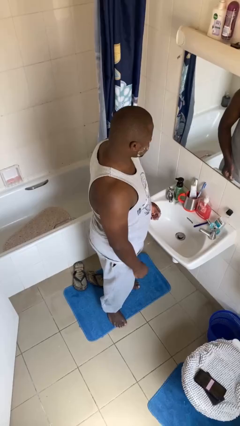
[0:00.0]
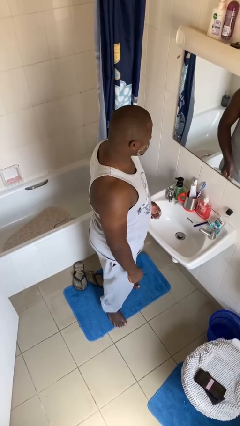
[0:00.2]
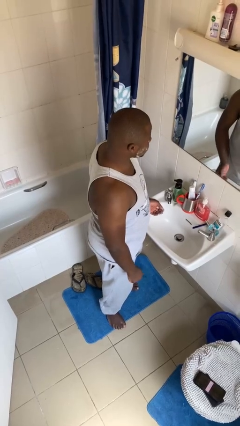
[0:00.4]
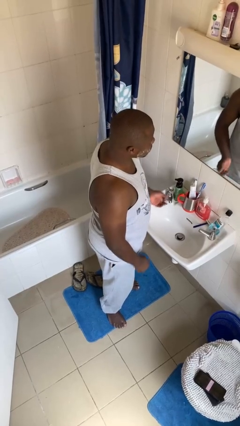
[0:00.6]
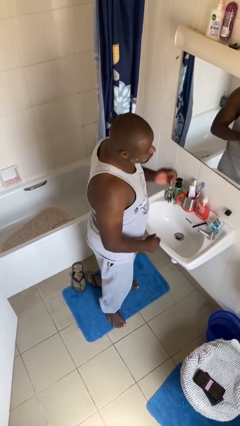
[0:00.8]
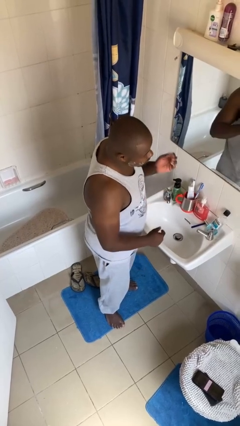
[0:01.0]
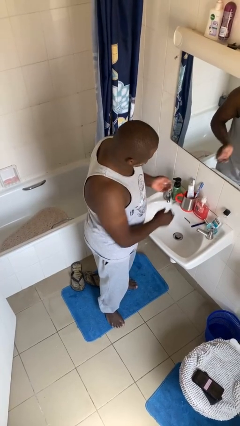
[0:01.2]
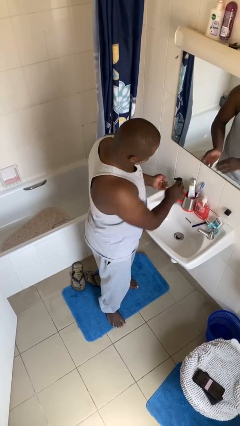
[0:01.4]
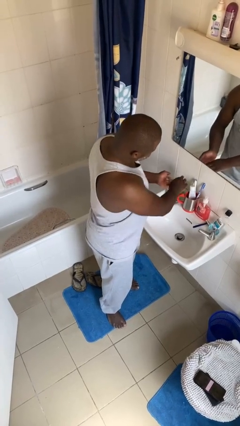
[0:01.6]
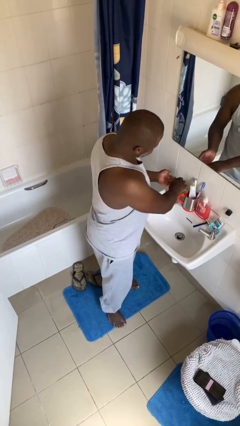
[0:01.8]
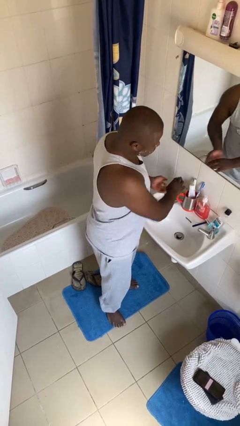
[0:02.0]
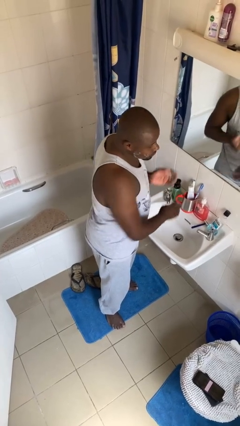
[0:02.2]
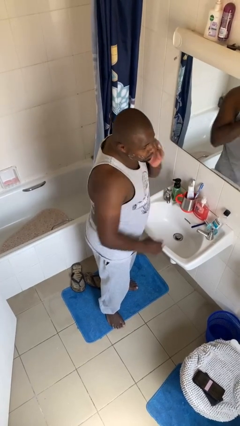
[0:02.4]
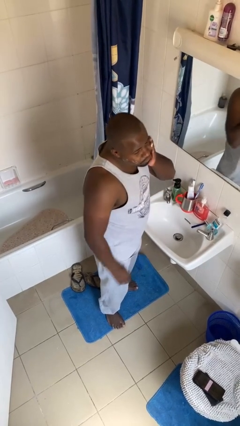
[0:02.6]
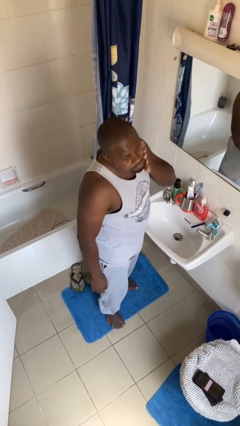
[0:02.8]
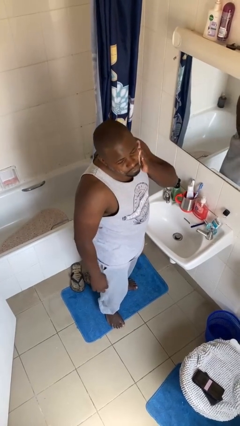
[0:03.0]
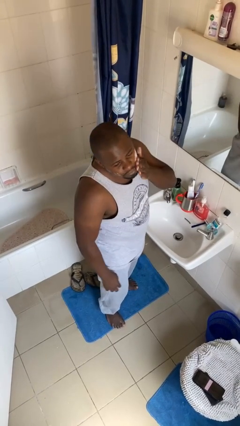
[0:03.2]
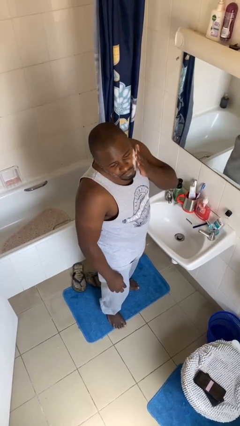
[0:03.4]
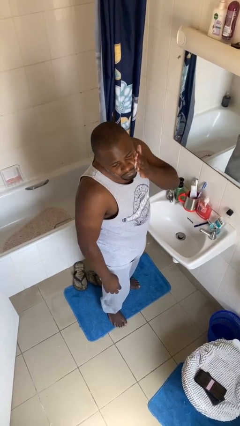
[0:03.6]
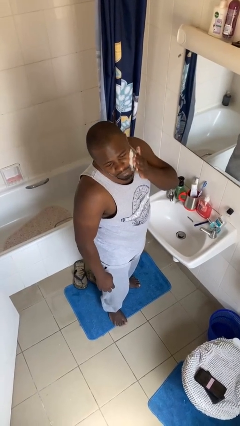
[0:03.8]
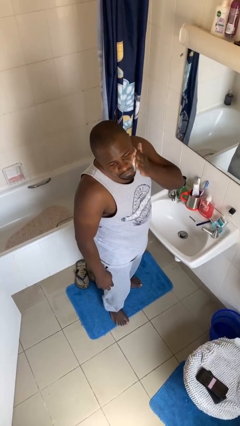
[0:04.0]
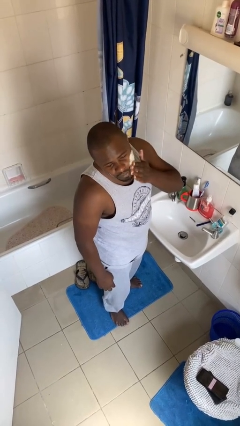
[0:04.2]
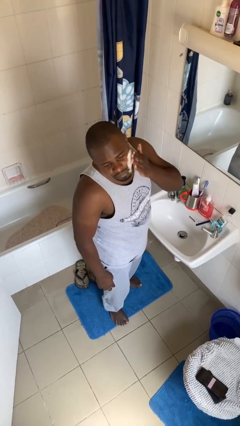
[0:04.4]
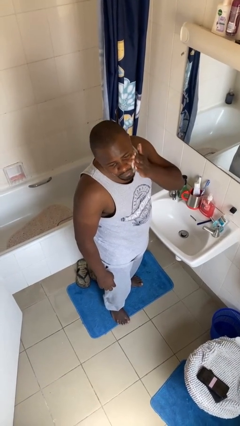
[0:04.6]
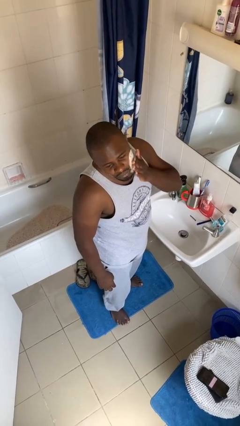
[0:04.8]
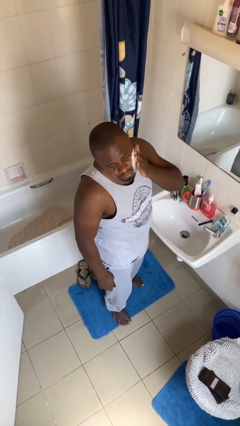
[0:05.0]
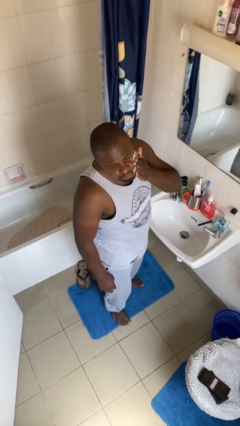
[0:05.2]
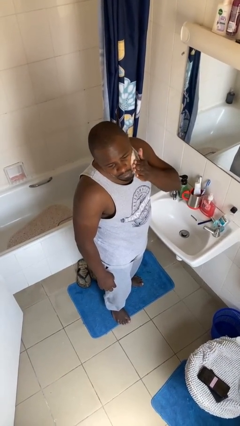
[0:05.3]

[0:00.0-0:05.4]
person applies shaving cream

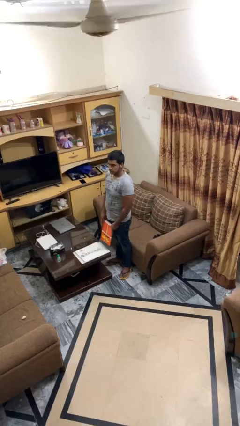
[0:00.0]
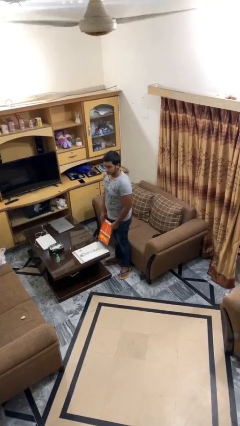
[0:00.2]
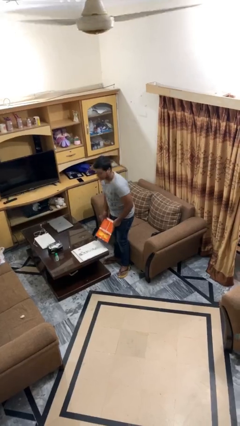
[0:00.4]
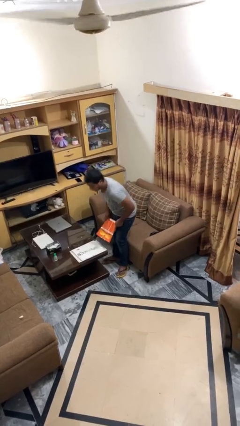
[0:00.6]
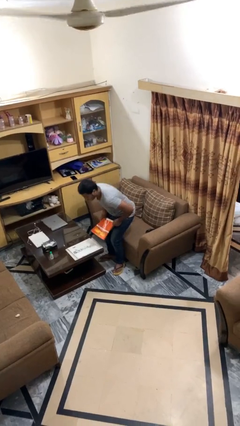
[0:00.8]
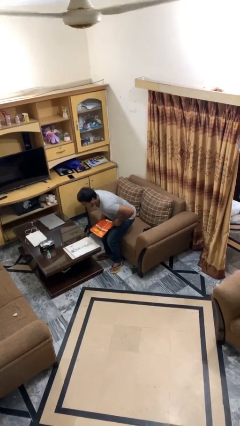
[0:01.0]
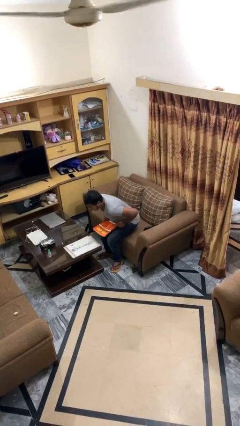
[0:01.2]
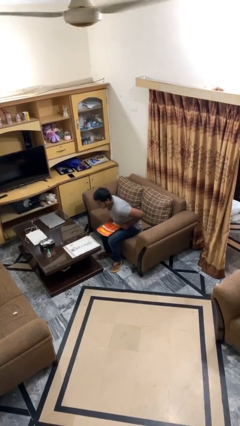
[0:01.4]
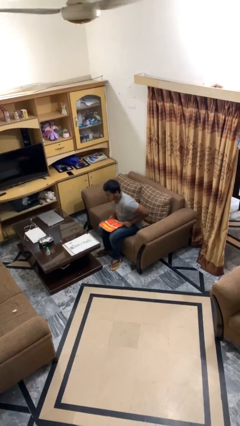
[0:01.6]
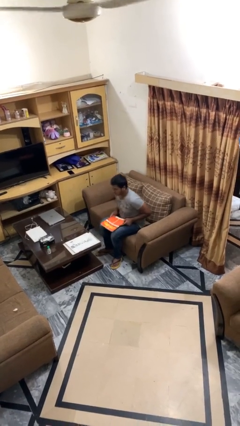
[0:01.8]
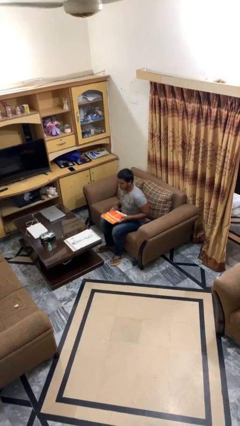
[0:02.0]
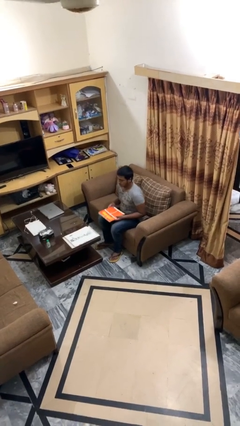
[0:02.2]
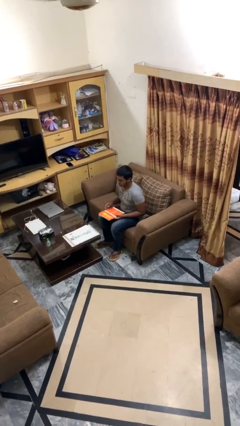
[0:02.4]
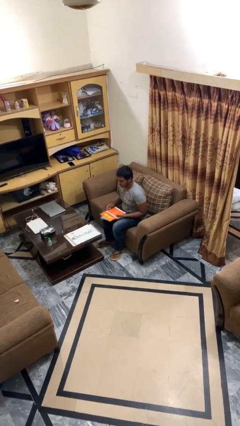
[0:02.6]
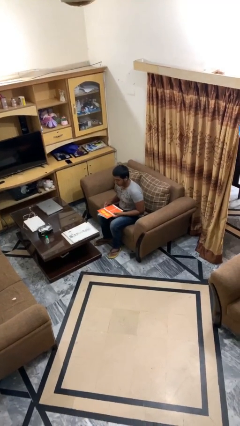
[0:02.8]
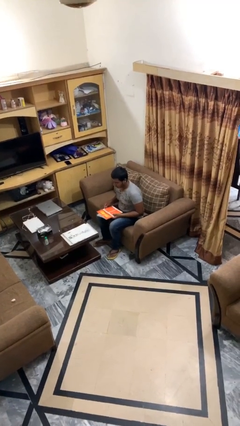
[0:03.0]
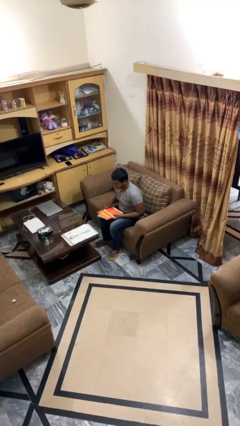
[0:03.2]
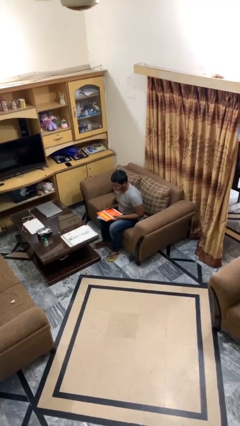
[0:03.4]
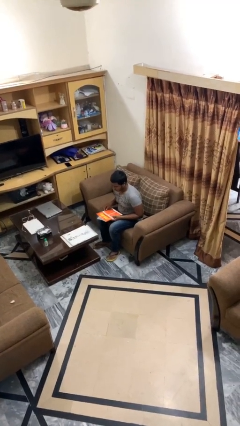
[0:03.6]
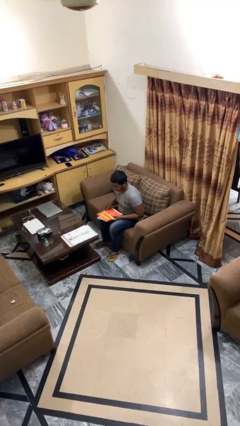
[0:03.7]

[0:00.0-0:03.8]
person sits down

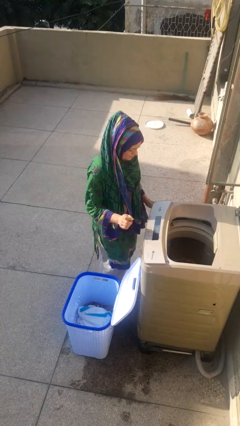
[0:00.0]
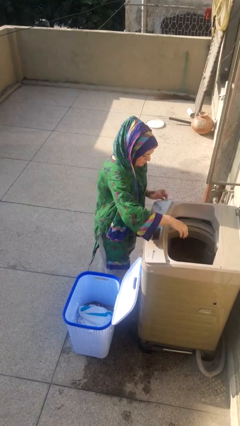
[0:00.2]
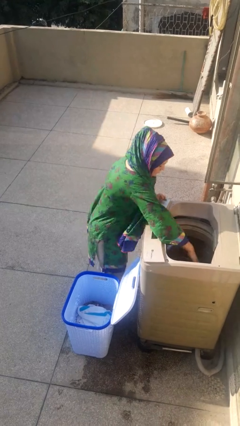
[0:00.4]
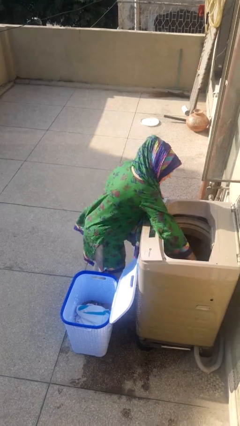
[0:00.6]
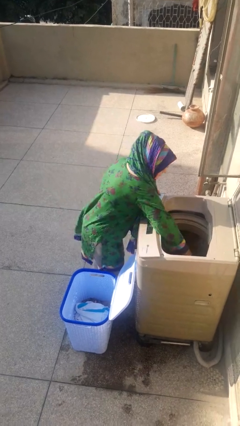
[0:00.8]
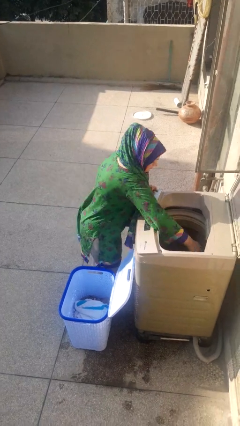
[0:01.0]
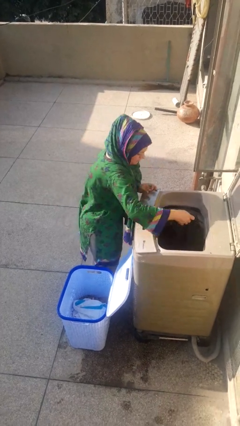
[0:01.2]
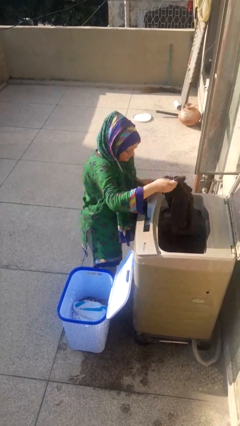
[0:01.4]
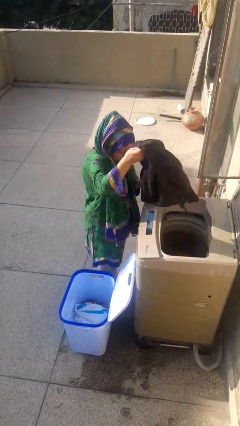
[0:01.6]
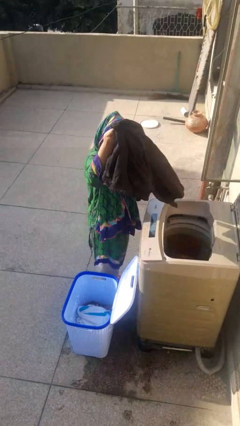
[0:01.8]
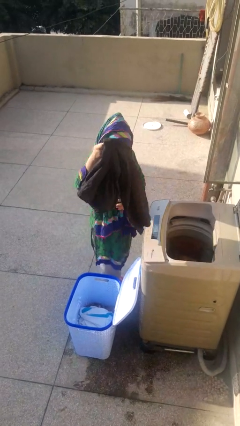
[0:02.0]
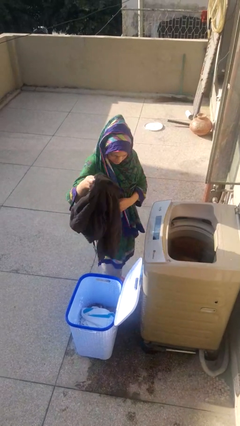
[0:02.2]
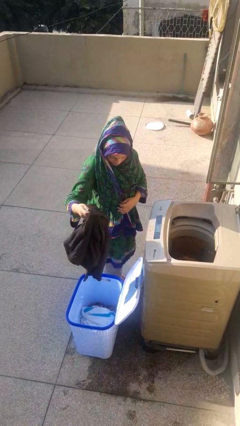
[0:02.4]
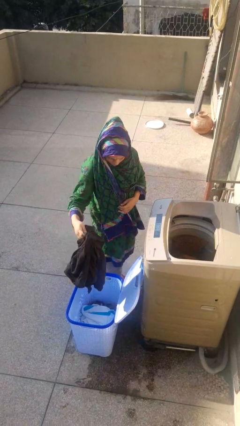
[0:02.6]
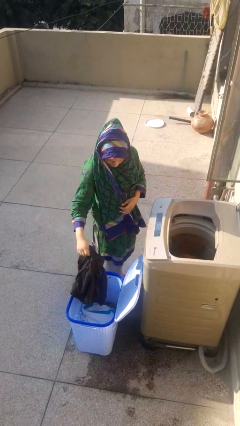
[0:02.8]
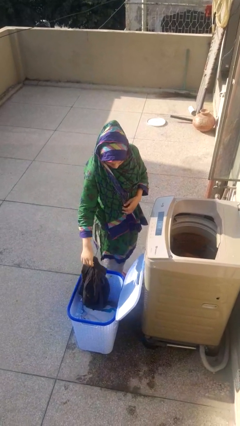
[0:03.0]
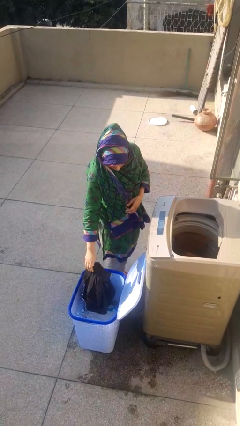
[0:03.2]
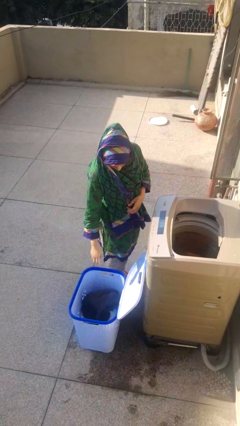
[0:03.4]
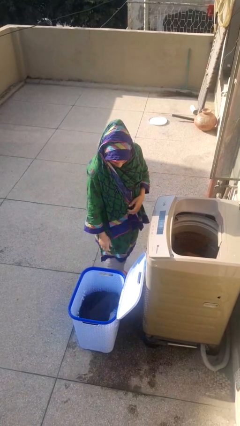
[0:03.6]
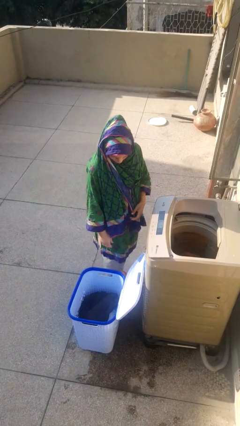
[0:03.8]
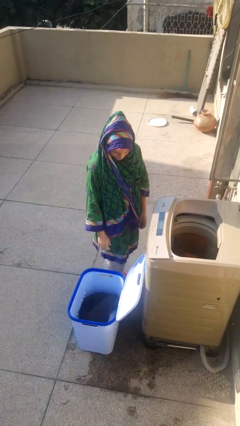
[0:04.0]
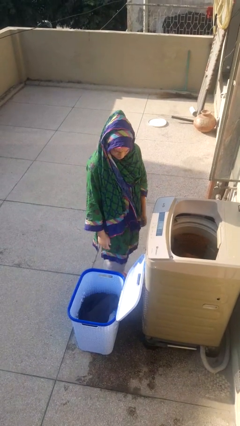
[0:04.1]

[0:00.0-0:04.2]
person unloads clotheswasher

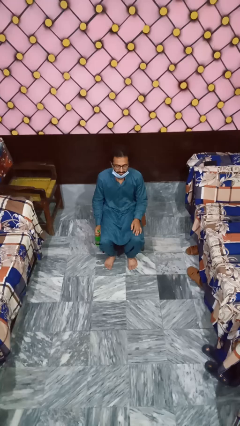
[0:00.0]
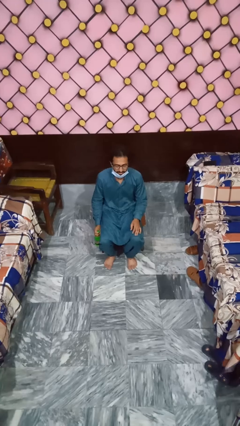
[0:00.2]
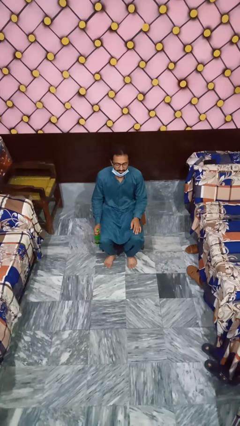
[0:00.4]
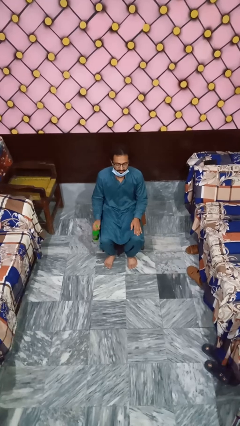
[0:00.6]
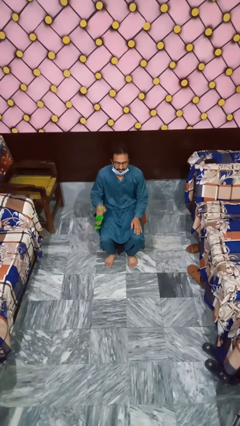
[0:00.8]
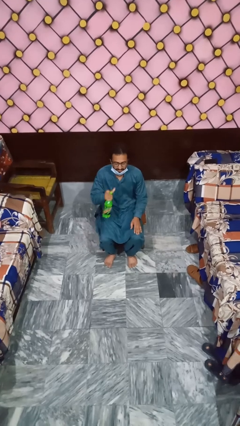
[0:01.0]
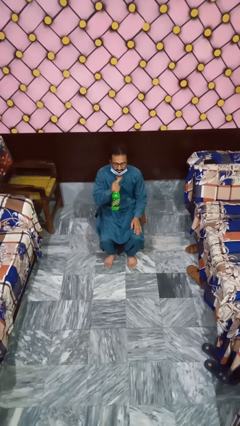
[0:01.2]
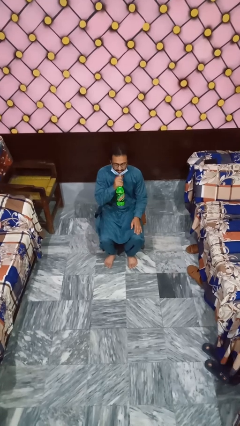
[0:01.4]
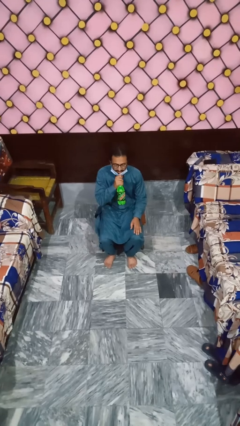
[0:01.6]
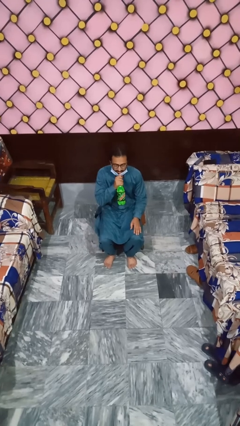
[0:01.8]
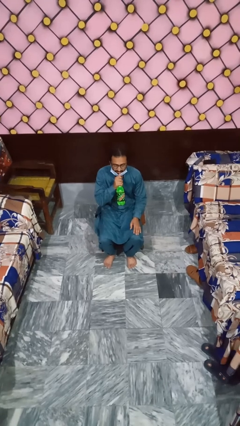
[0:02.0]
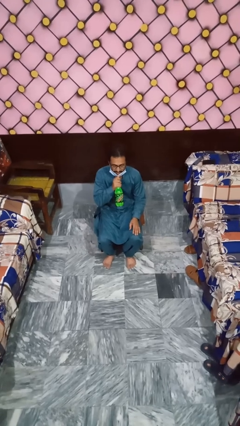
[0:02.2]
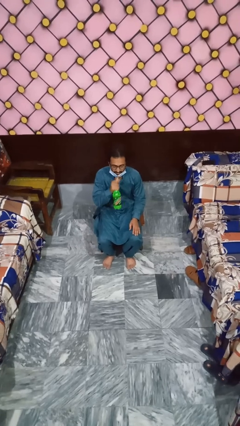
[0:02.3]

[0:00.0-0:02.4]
person drinks from straw

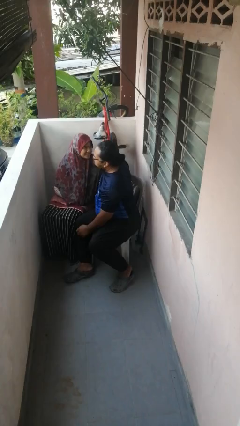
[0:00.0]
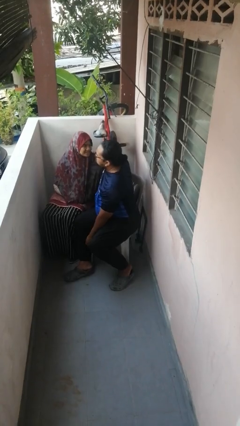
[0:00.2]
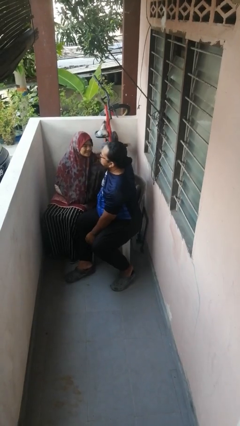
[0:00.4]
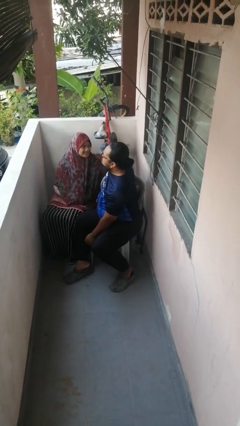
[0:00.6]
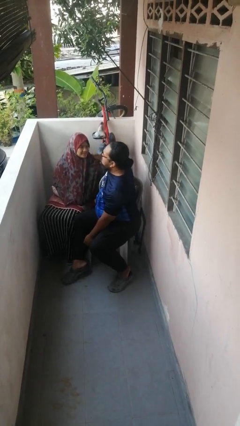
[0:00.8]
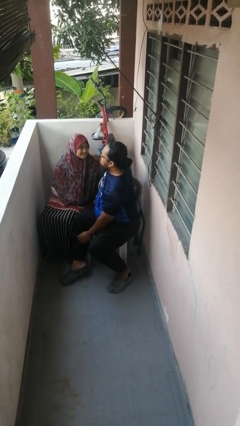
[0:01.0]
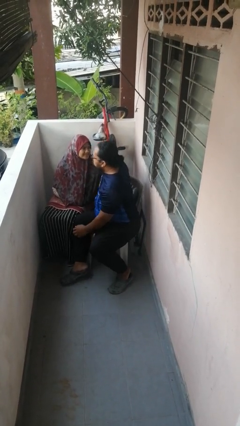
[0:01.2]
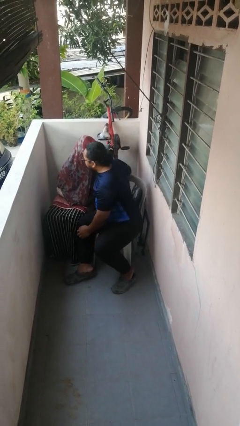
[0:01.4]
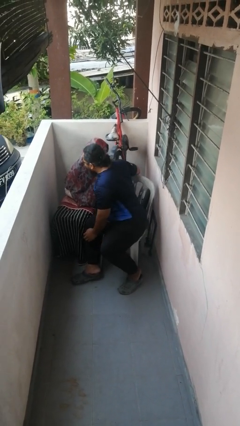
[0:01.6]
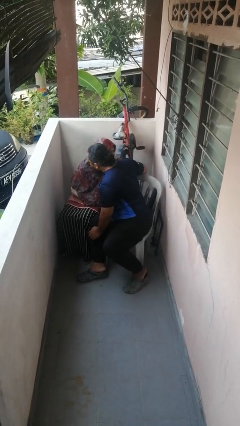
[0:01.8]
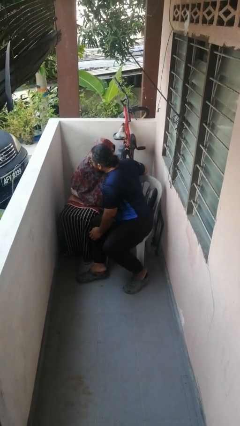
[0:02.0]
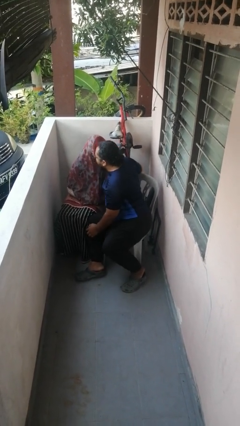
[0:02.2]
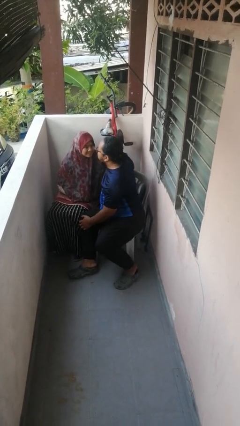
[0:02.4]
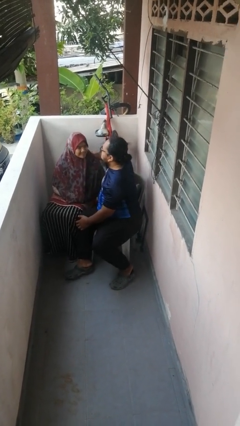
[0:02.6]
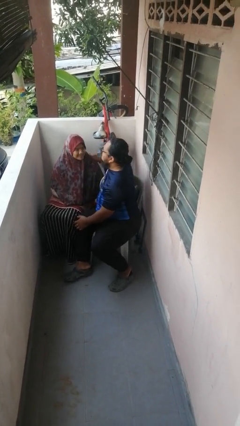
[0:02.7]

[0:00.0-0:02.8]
person kisses cheek of person
